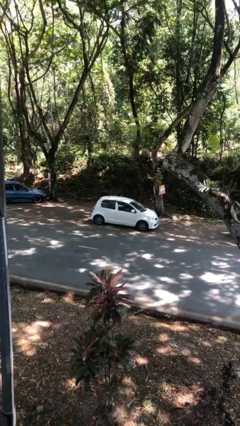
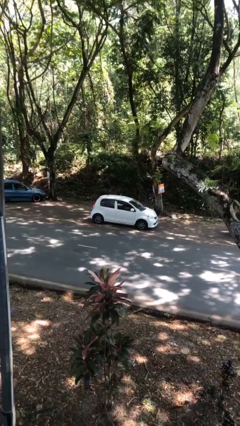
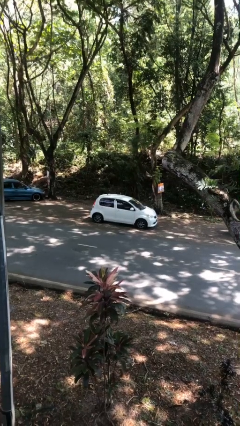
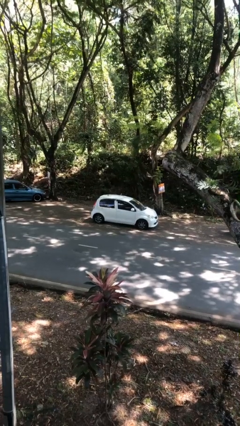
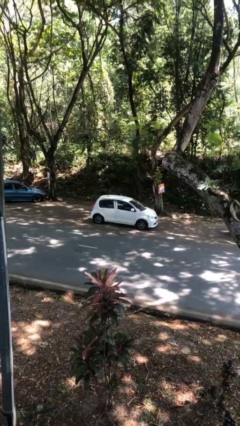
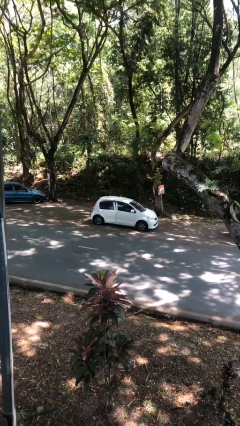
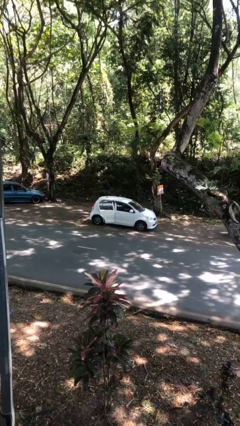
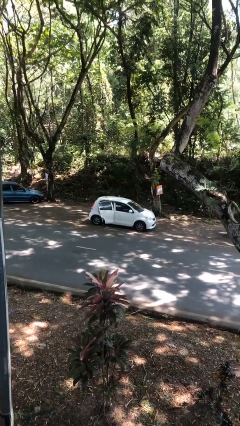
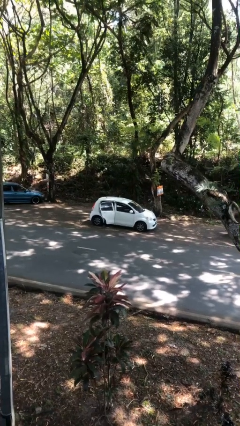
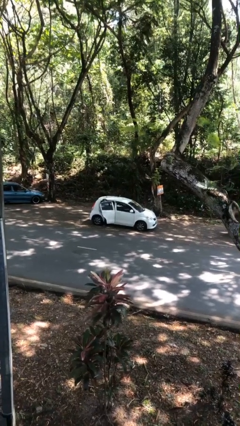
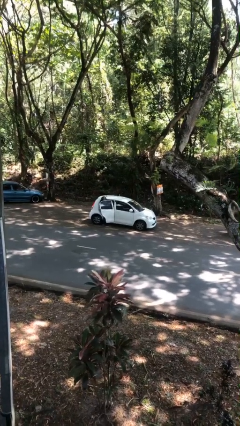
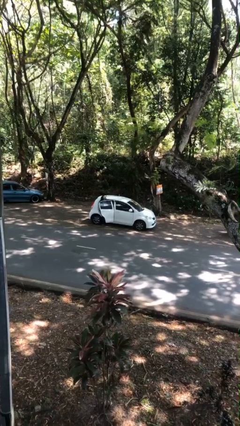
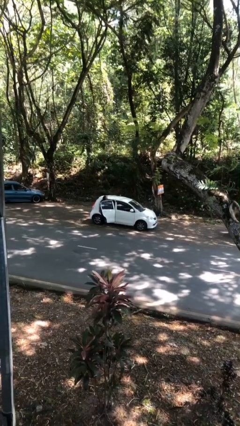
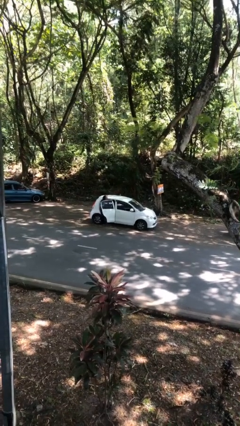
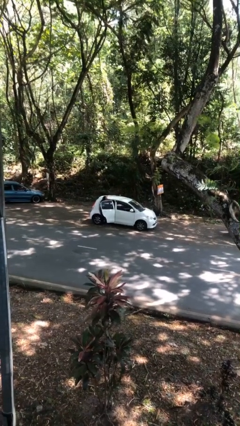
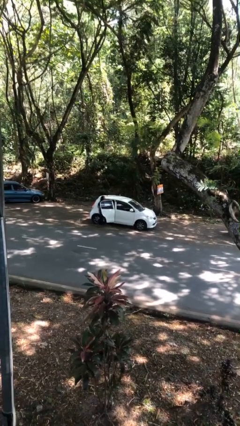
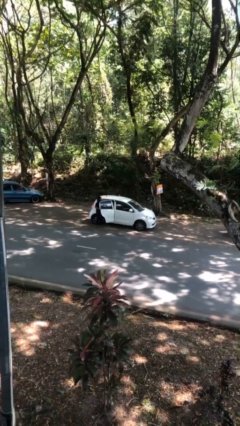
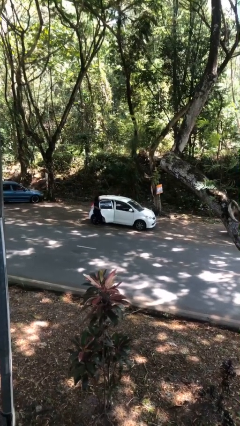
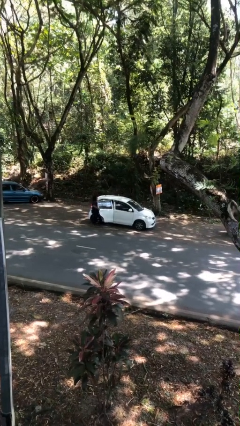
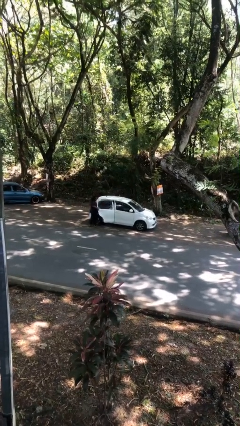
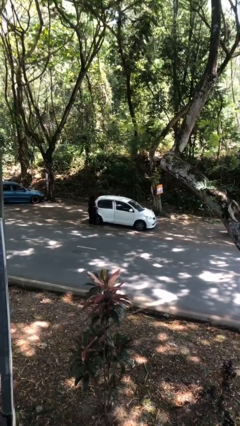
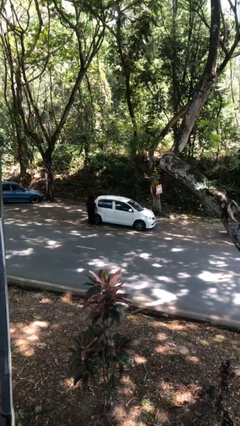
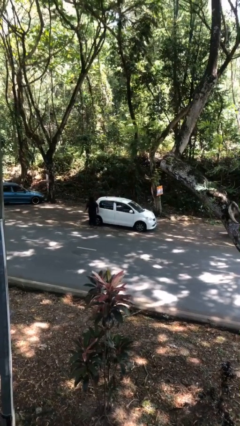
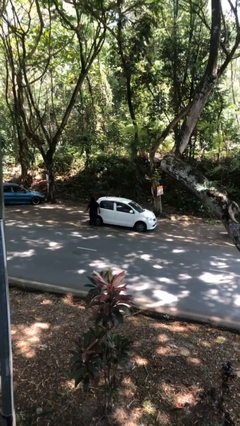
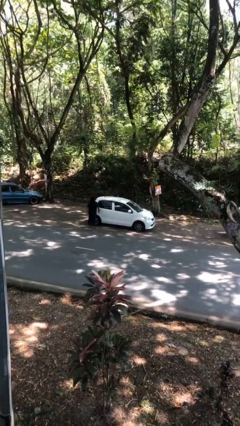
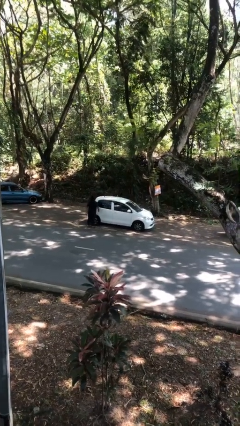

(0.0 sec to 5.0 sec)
car drops off person

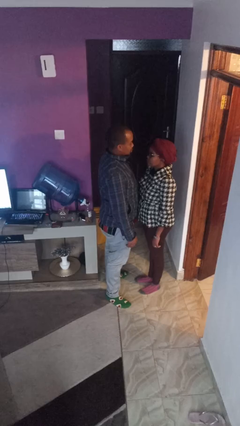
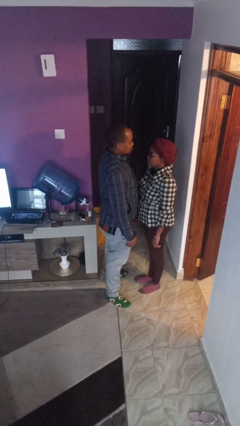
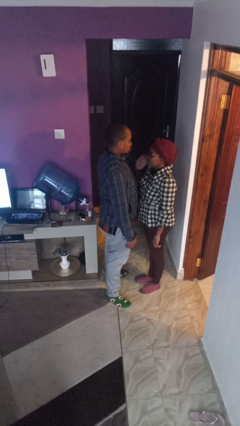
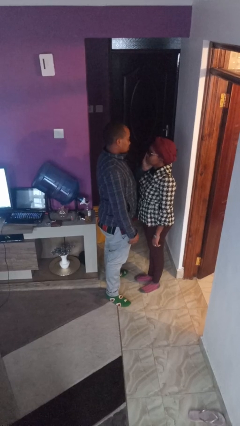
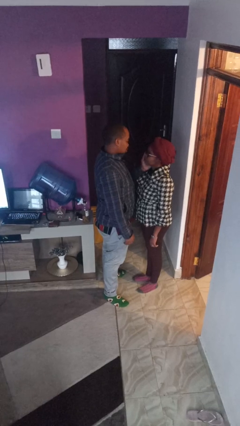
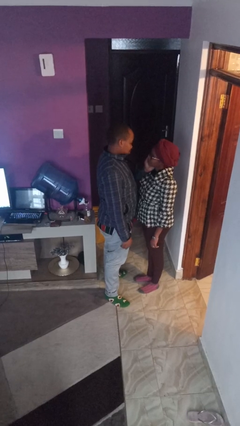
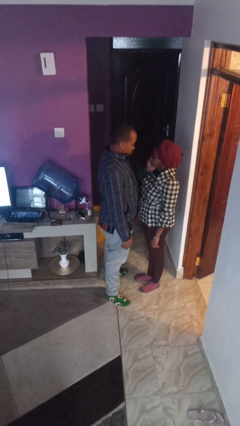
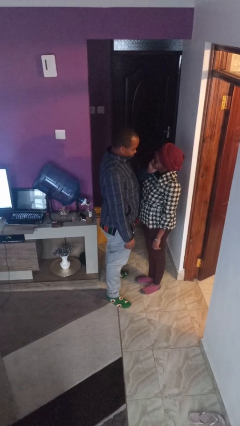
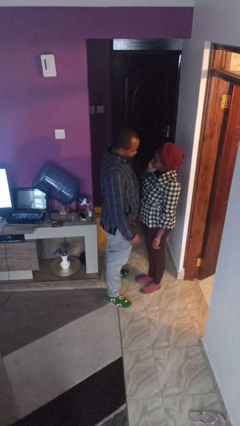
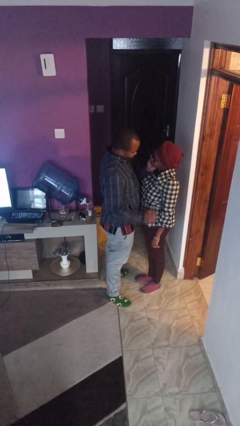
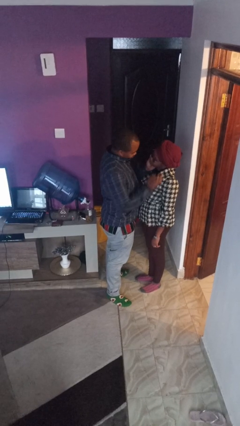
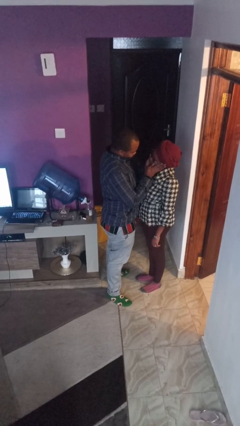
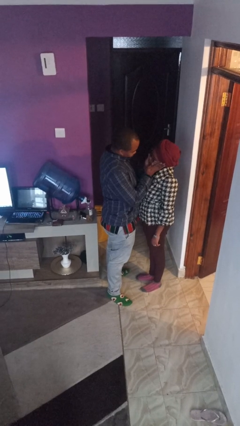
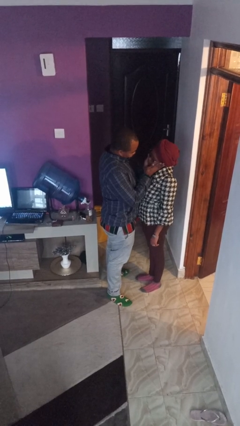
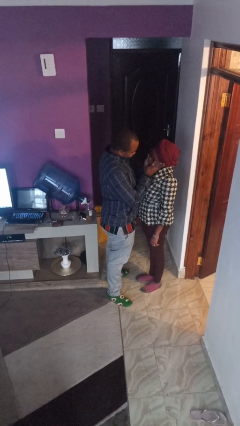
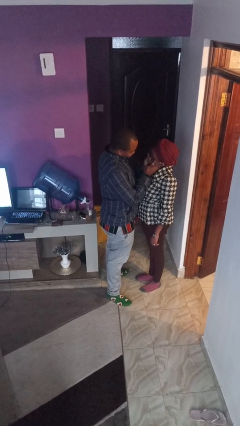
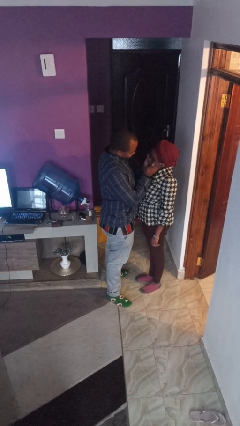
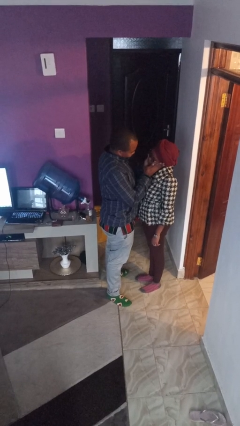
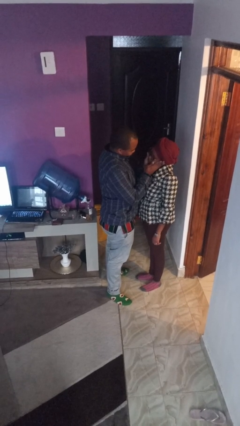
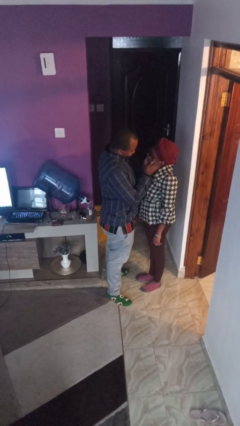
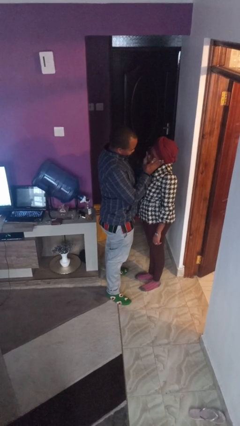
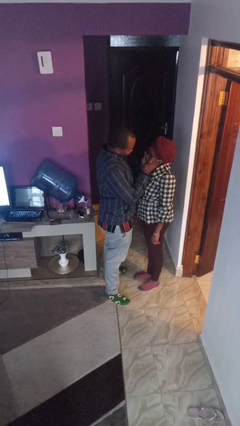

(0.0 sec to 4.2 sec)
person touches face of person

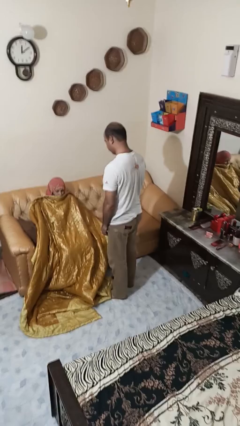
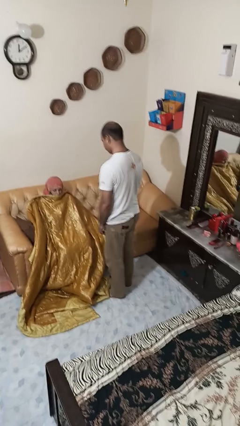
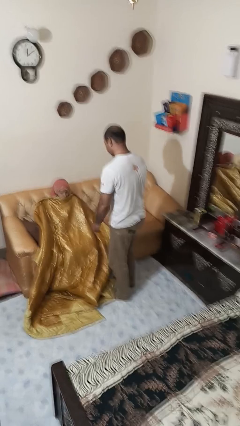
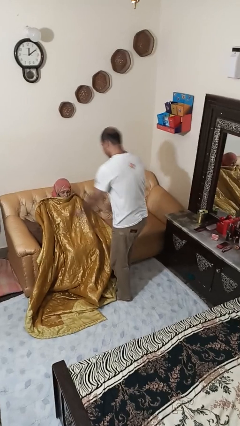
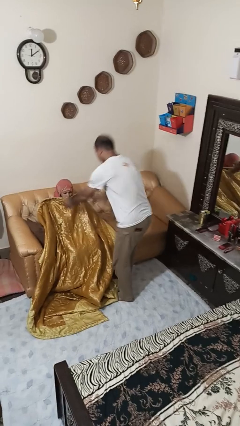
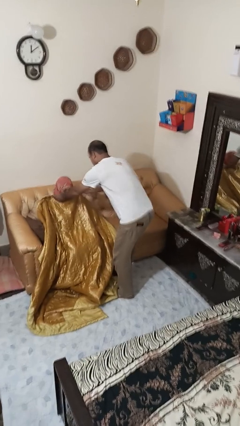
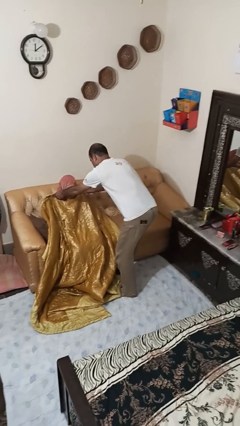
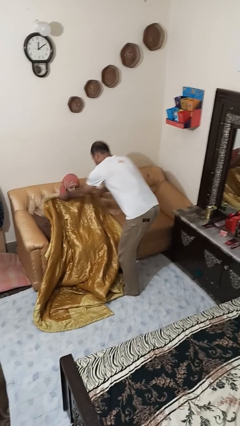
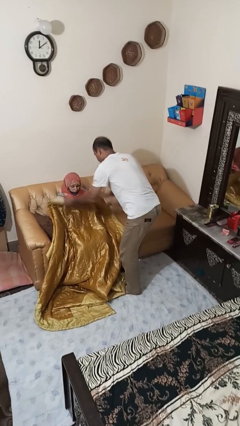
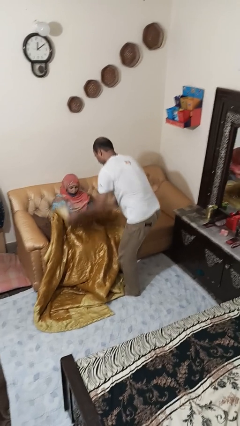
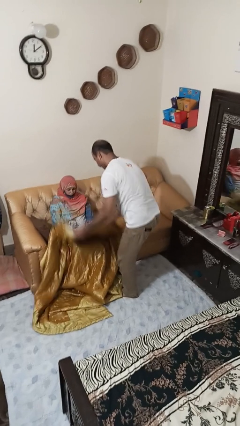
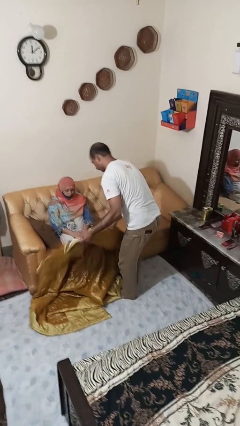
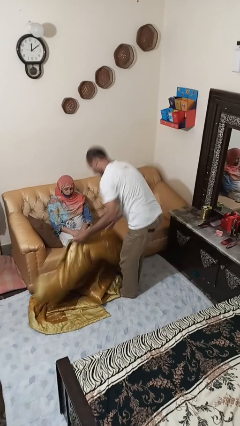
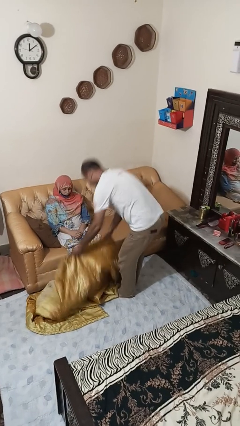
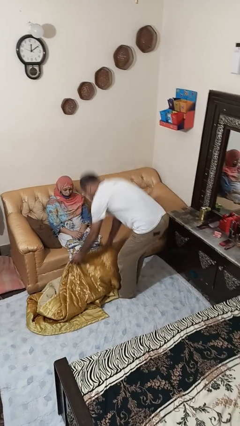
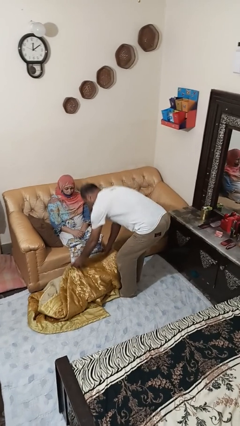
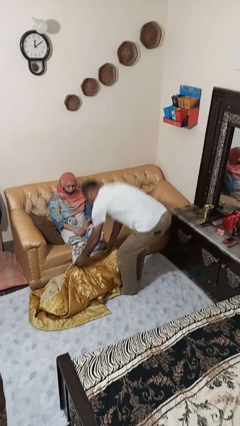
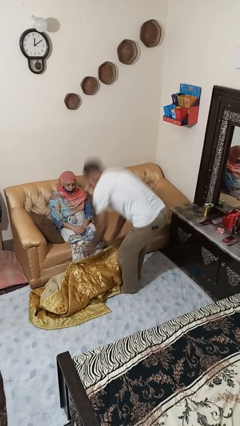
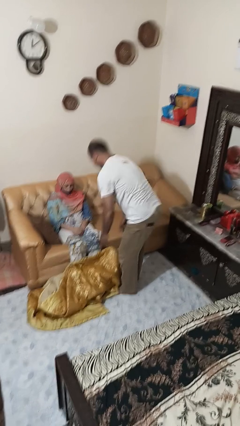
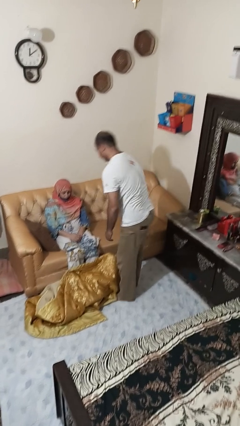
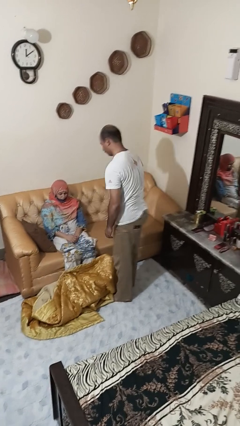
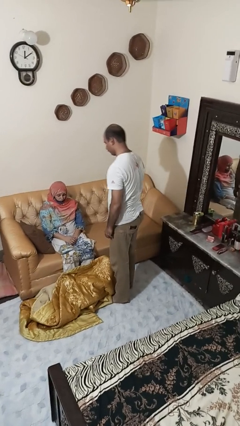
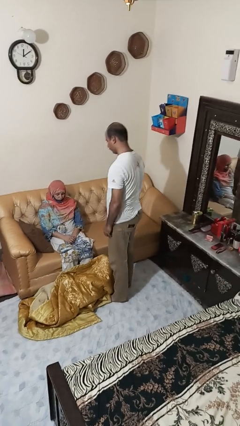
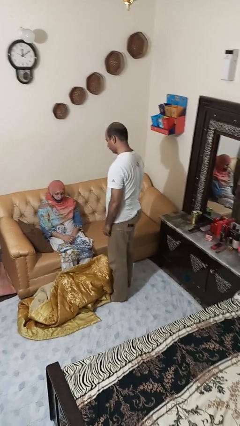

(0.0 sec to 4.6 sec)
person uncovers friend with blanket

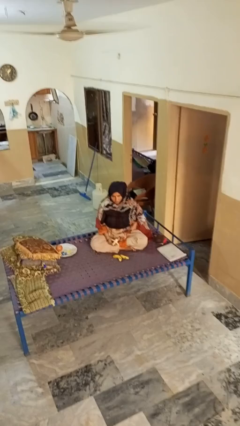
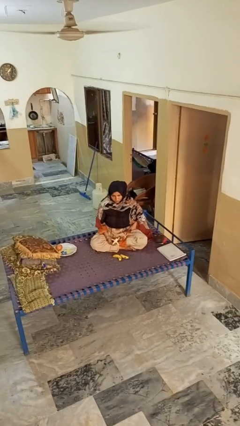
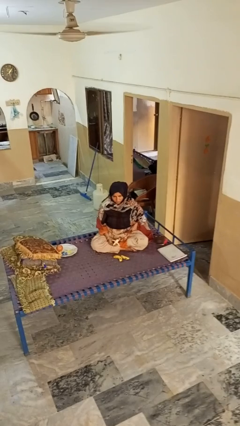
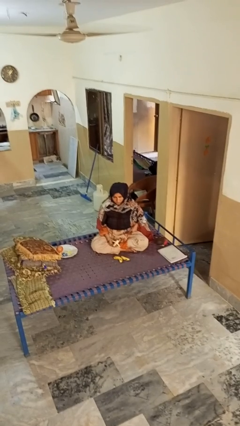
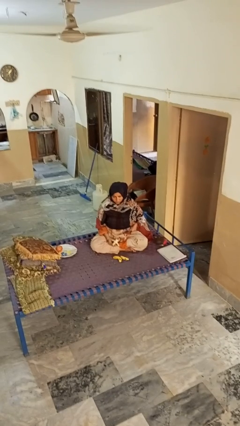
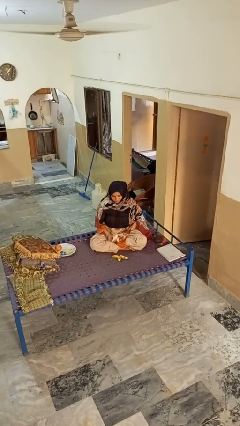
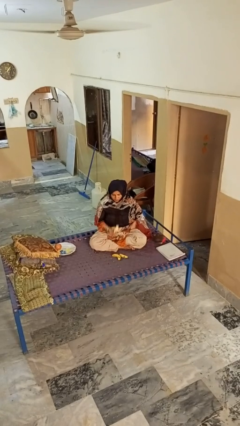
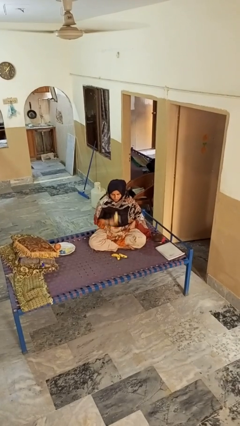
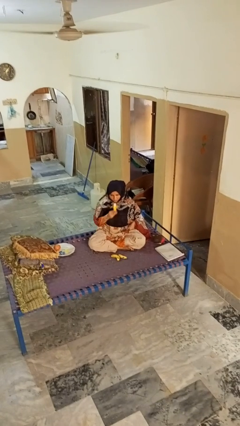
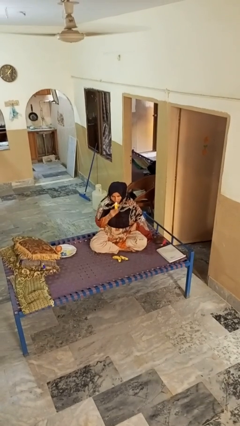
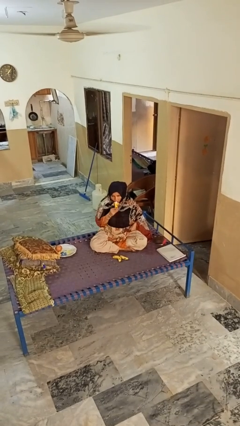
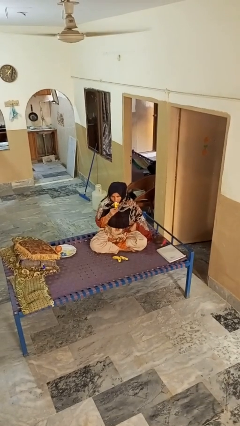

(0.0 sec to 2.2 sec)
person eats banana

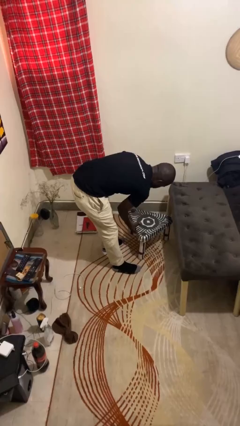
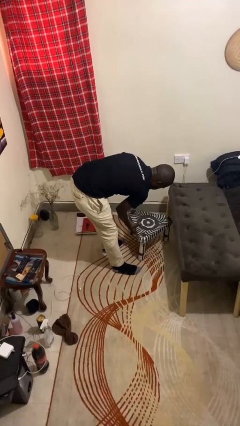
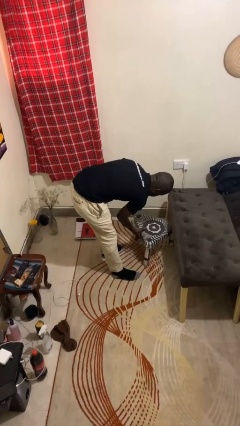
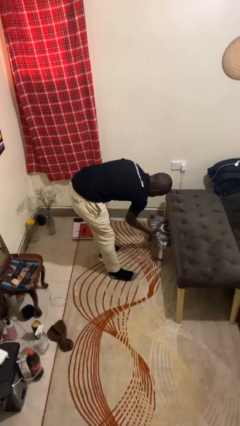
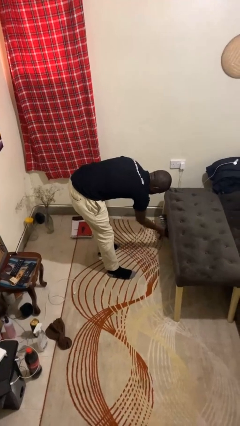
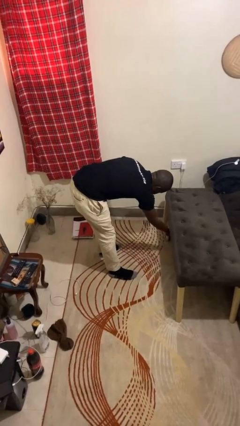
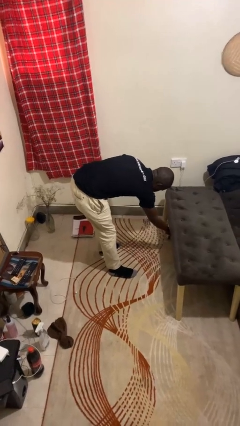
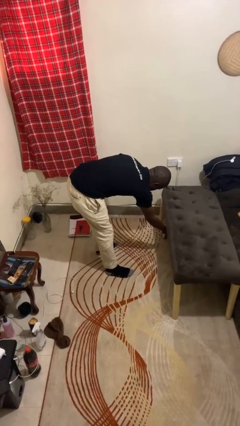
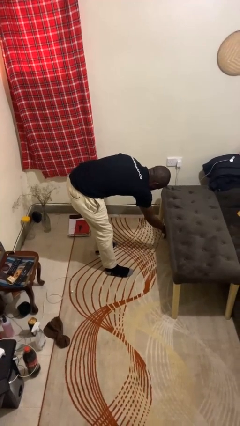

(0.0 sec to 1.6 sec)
person pushes in chair

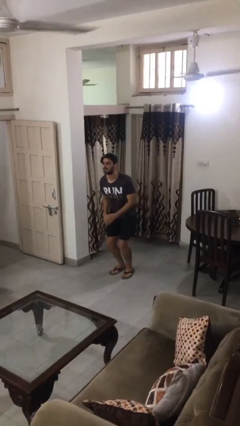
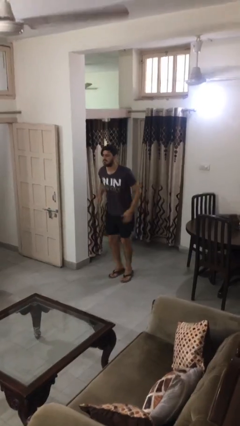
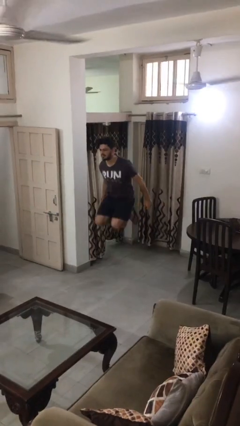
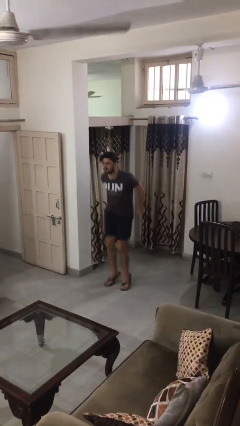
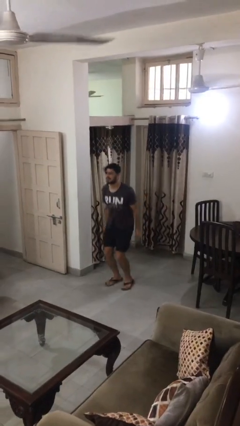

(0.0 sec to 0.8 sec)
person jumps
